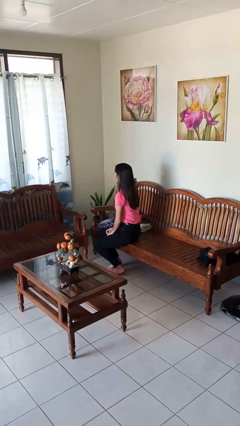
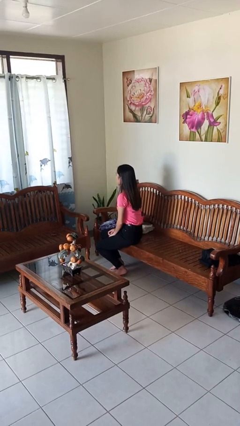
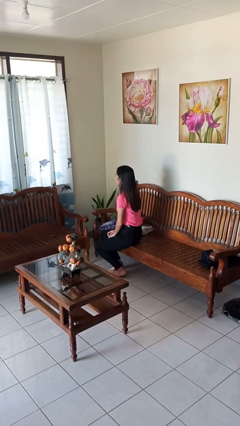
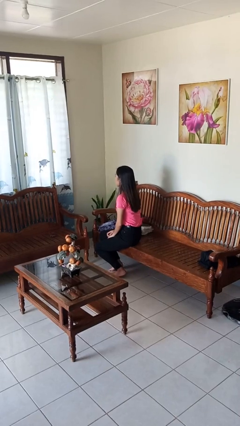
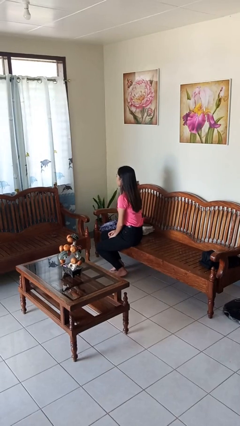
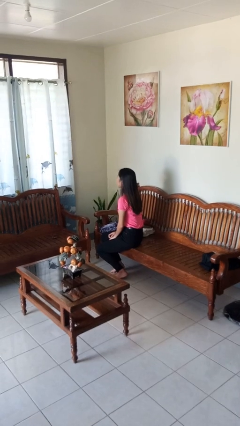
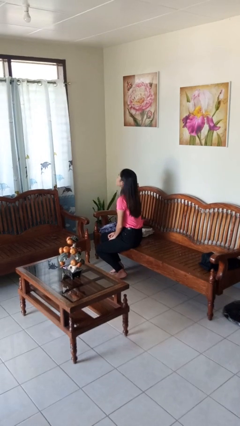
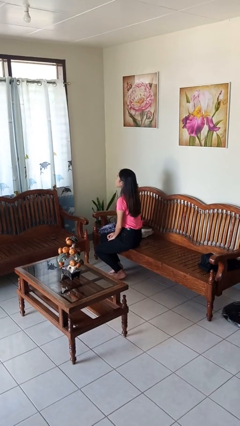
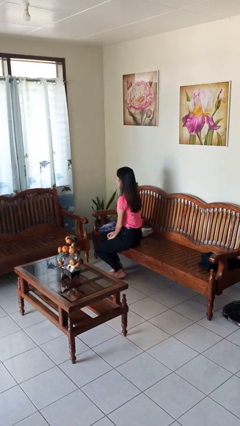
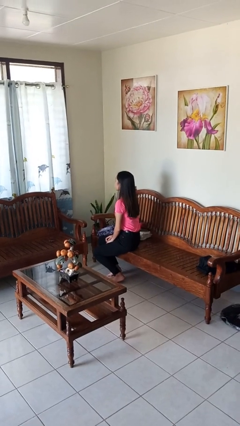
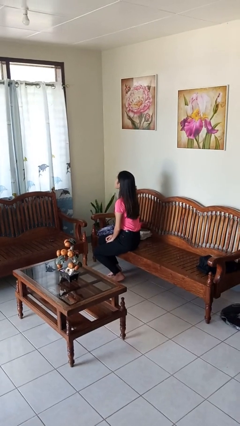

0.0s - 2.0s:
person nods head

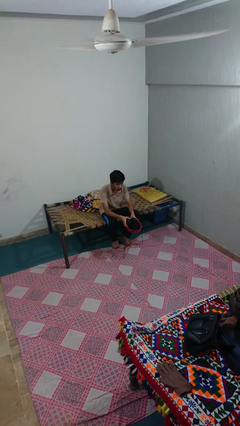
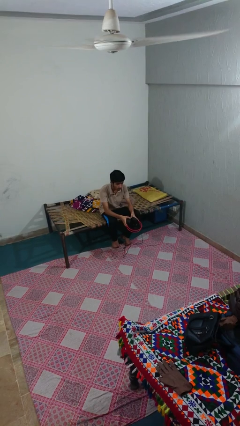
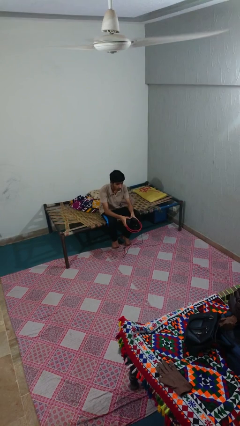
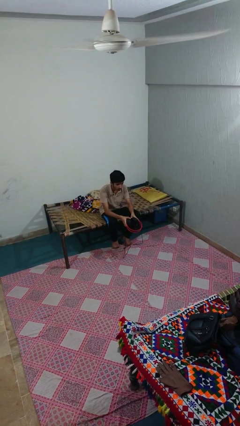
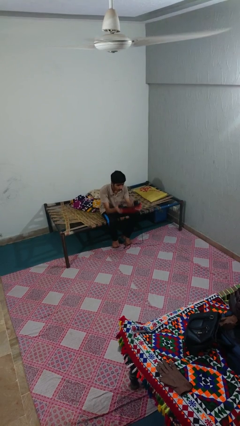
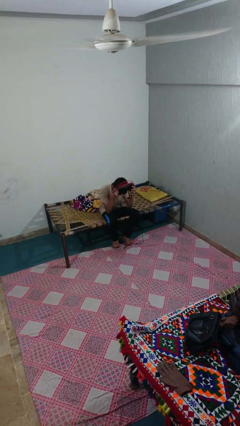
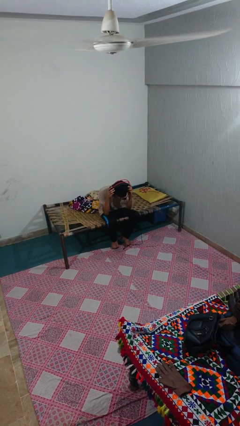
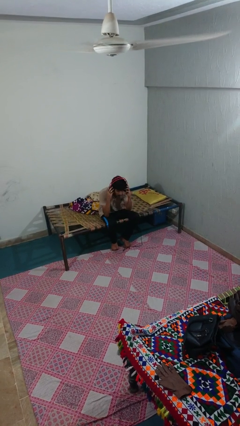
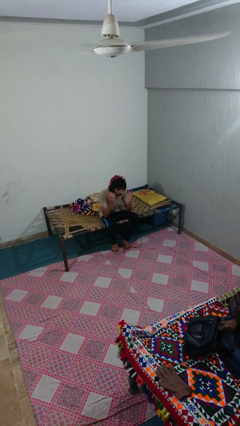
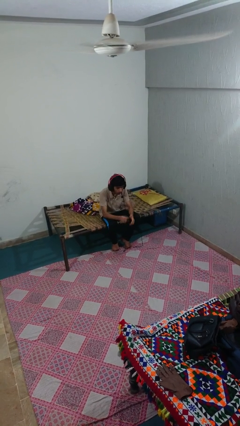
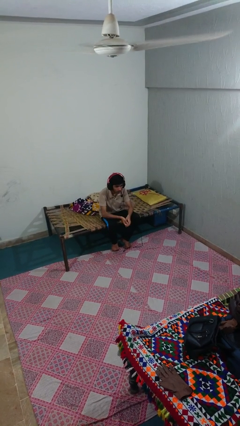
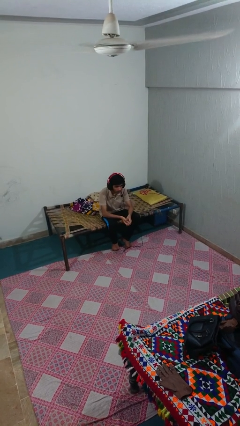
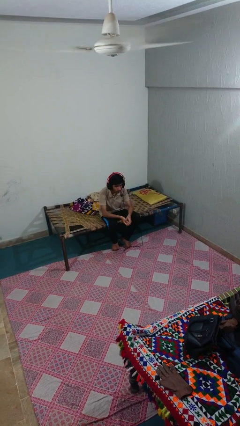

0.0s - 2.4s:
person puts on headphones

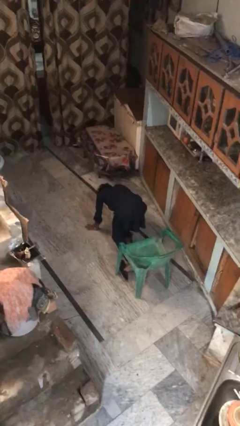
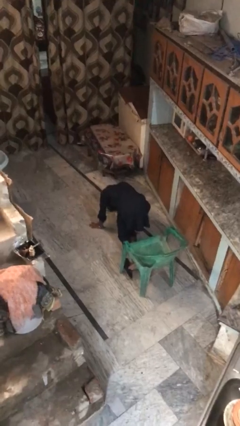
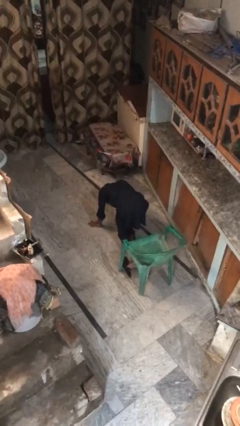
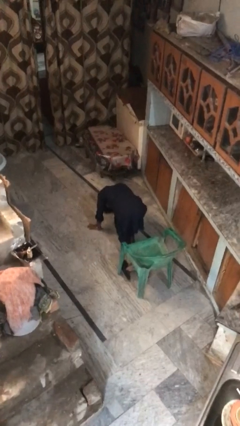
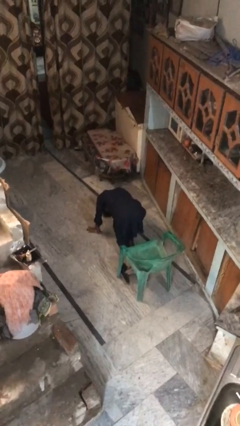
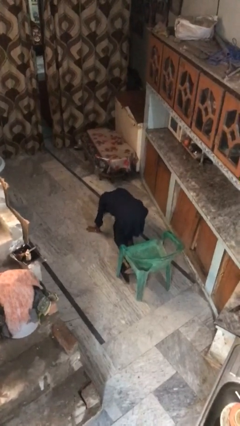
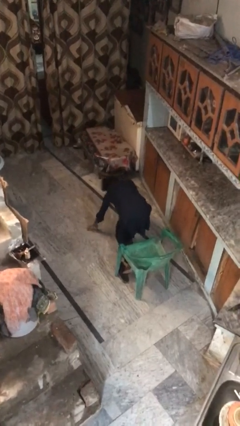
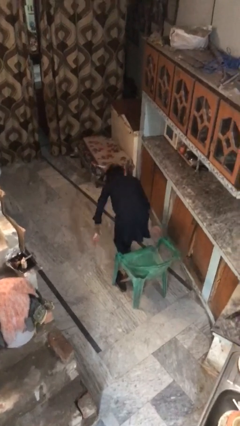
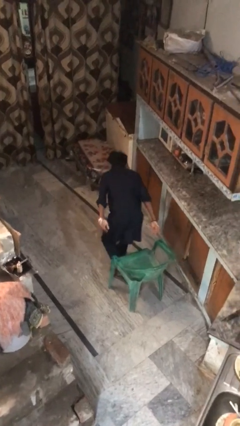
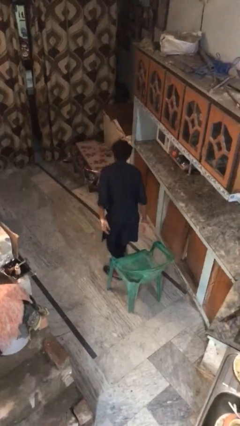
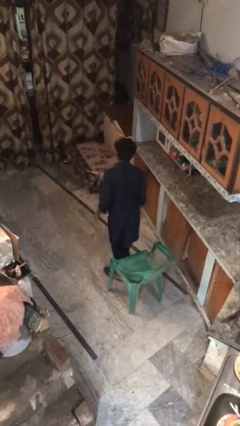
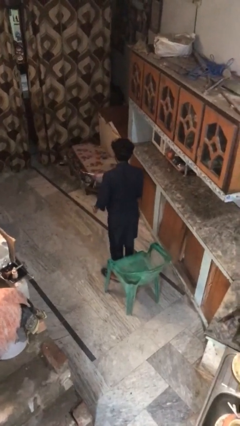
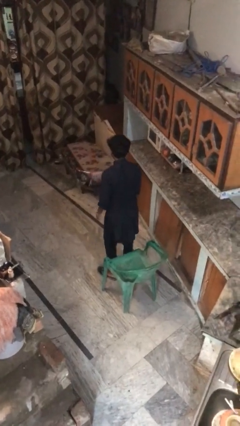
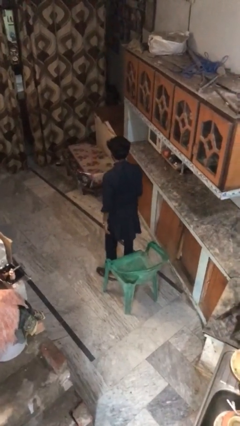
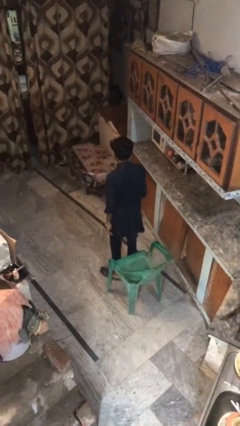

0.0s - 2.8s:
person stands up from floor

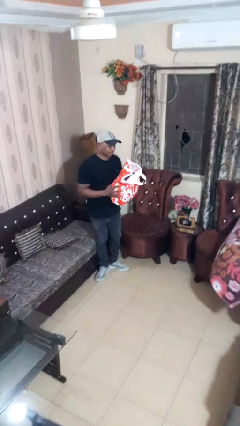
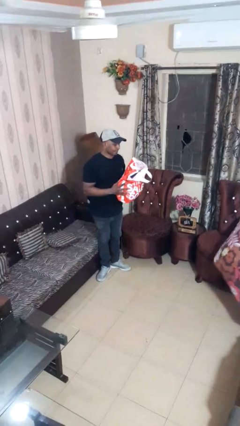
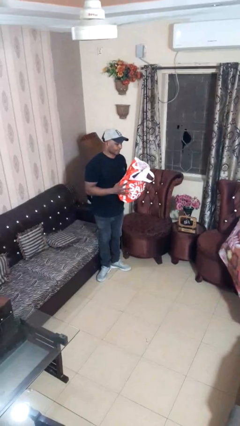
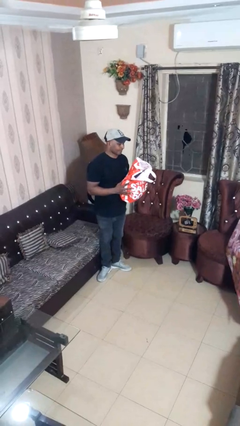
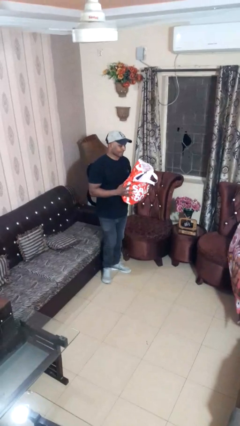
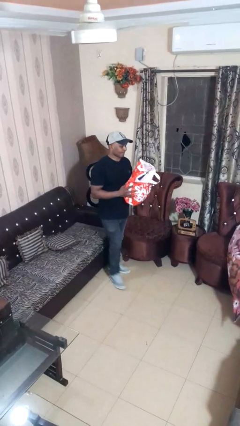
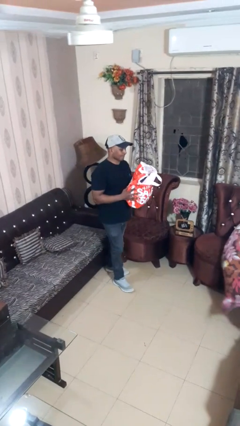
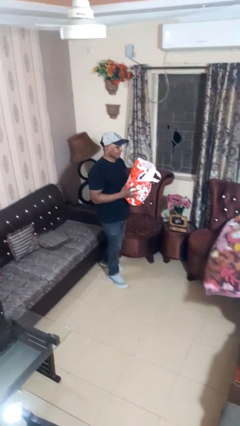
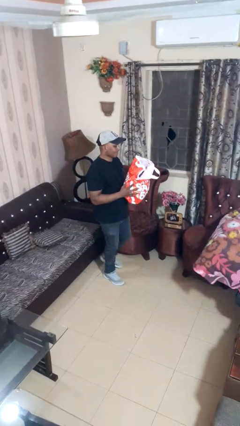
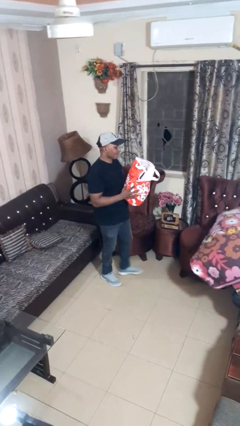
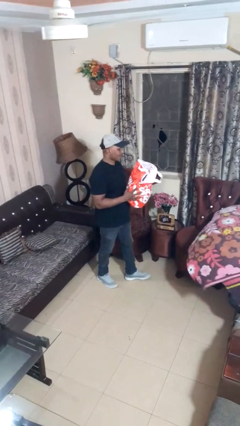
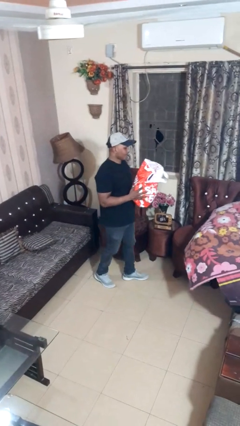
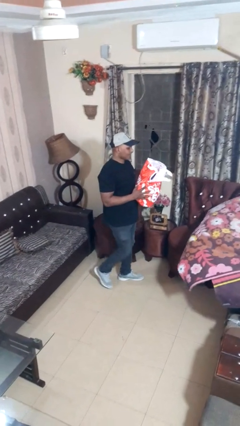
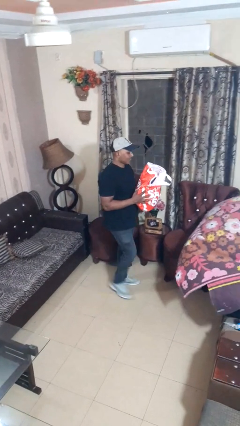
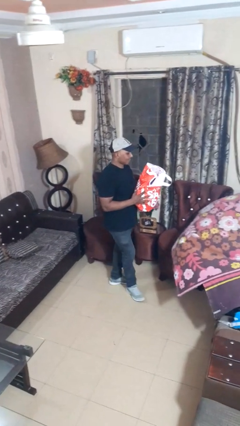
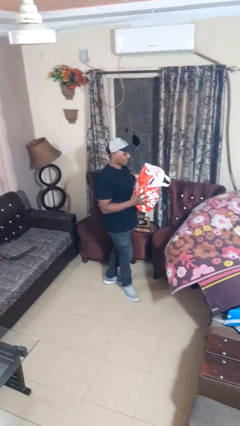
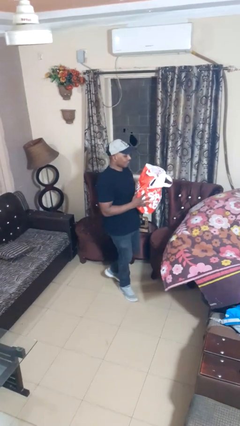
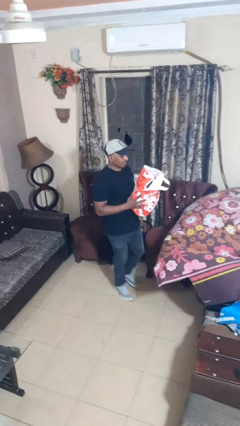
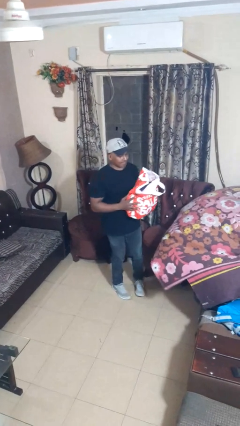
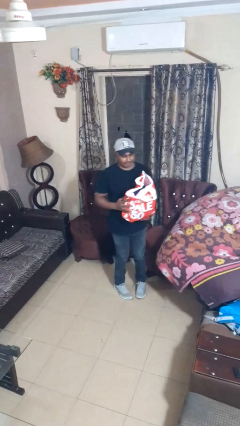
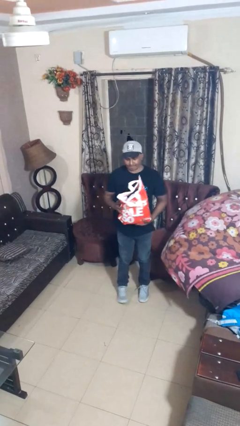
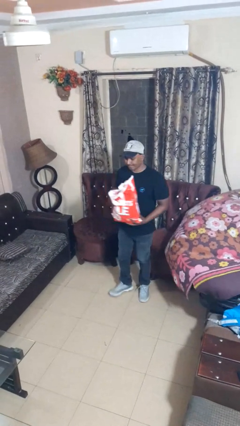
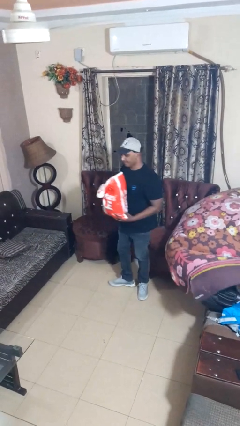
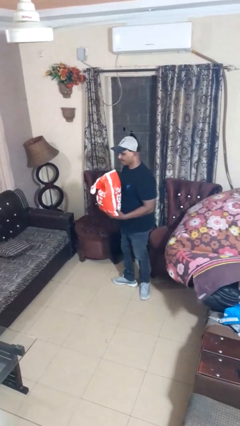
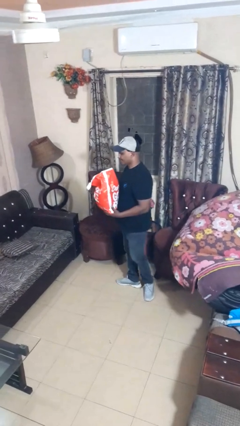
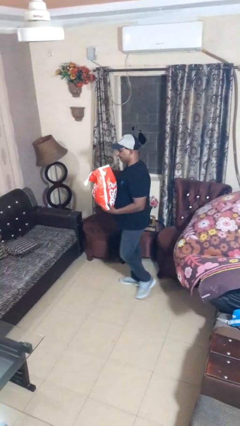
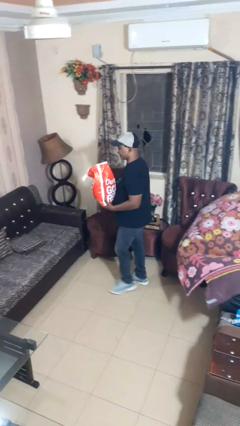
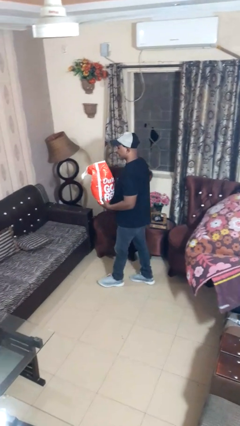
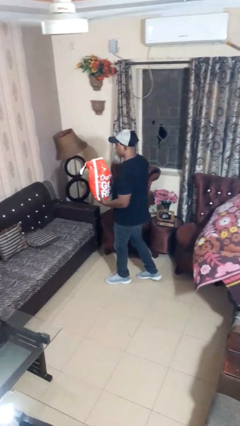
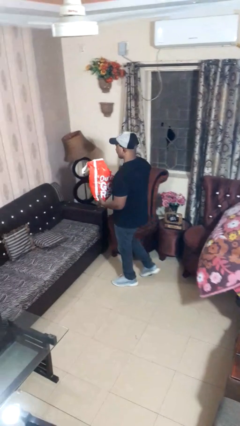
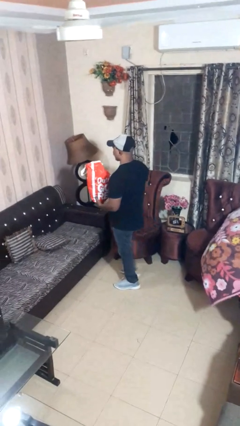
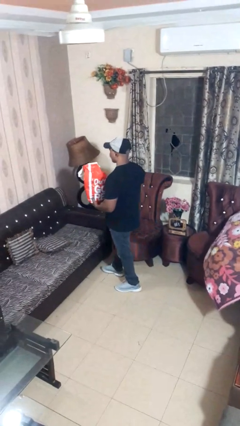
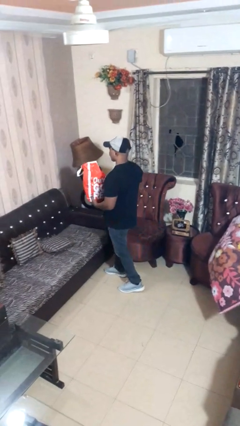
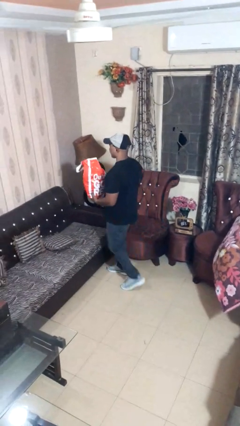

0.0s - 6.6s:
person carries groceries

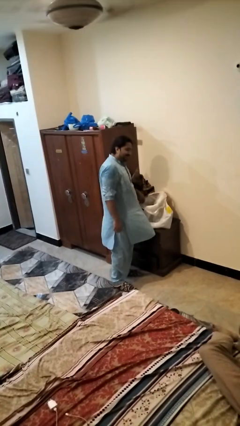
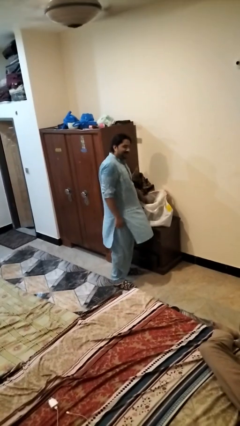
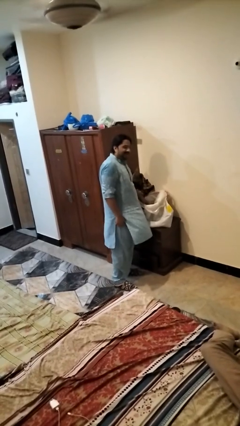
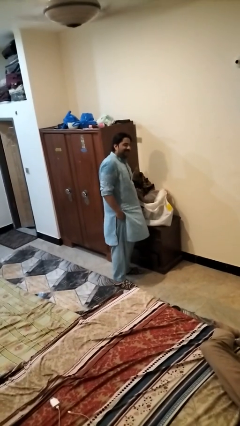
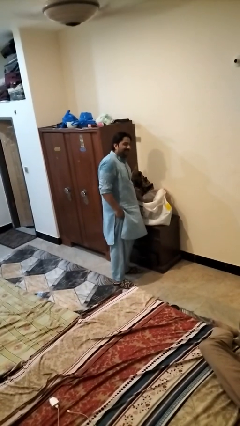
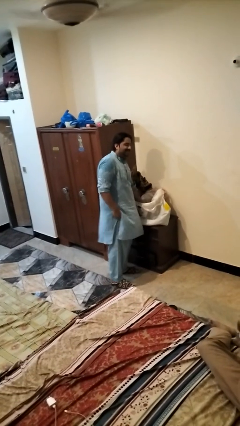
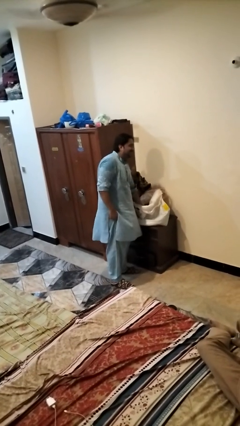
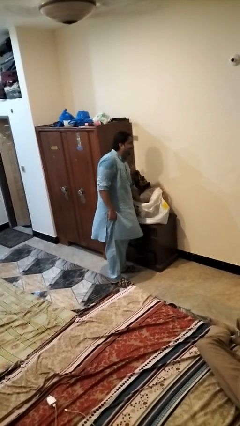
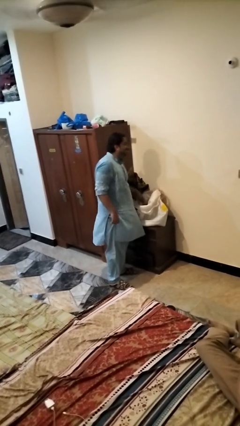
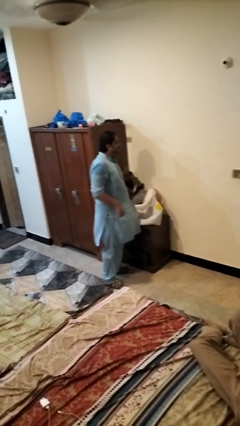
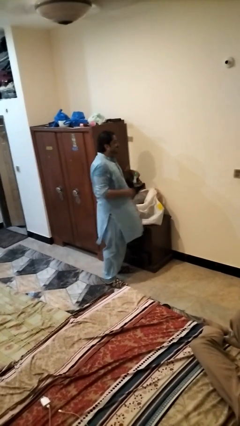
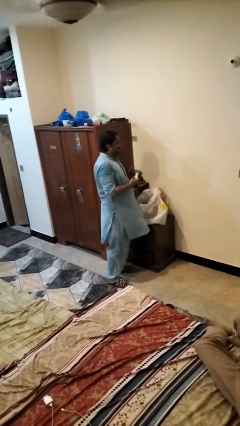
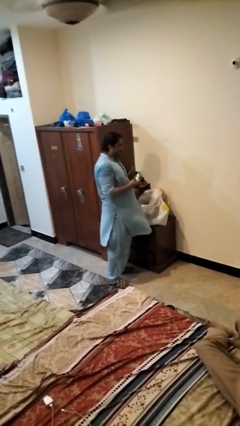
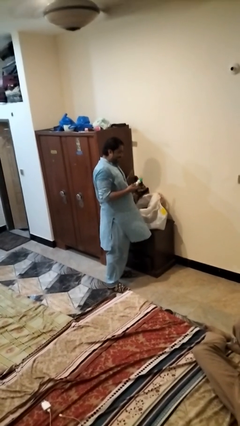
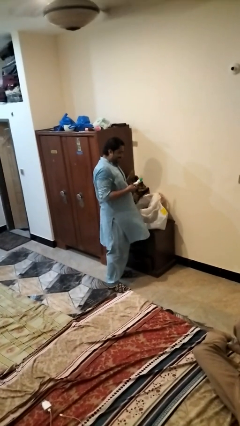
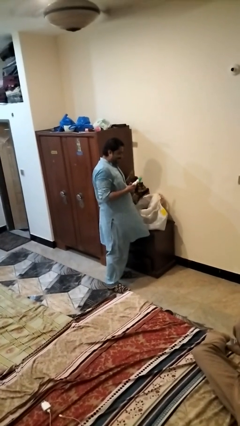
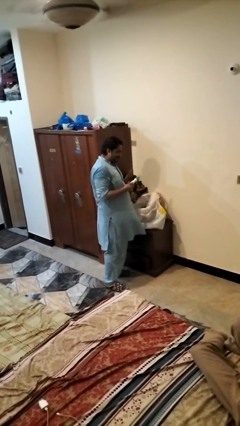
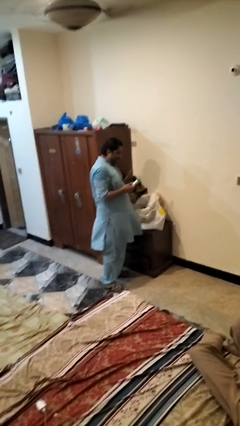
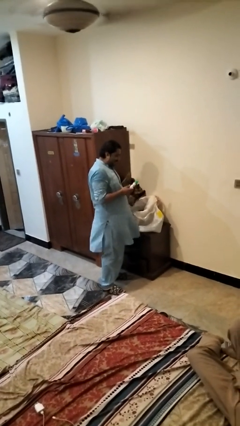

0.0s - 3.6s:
person takes object from bag
